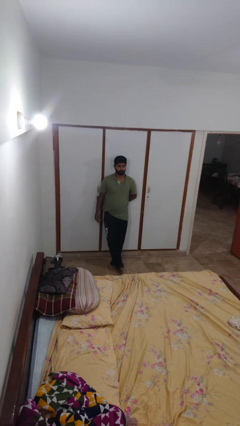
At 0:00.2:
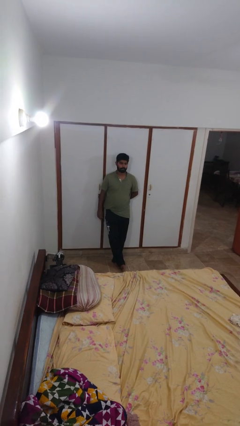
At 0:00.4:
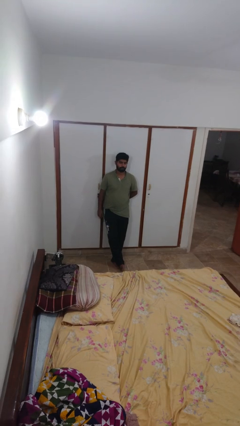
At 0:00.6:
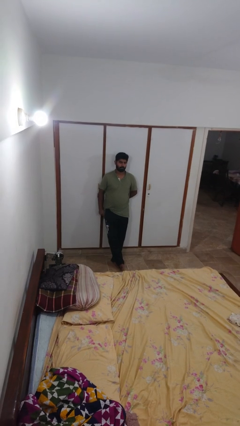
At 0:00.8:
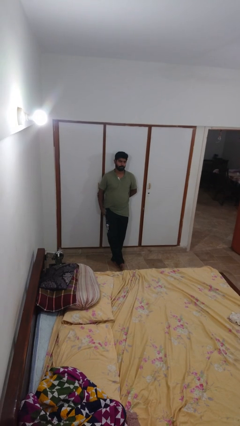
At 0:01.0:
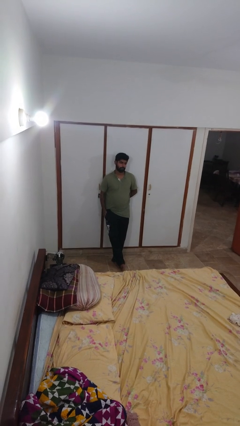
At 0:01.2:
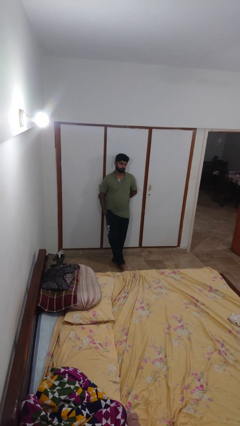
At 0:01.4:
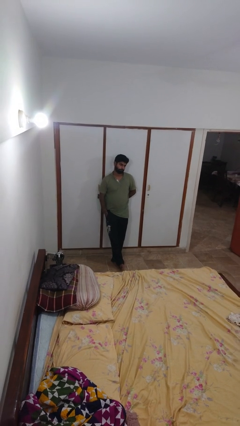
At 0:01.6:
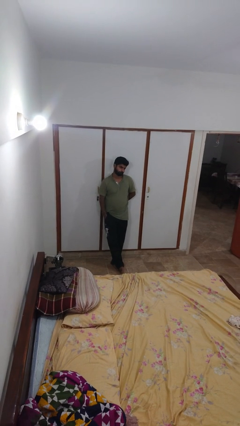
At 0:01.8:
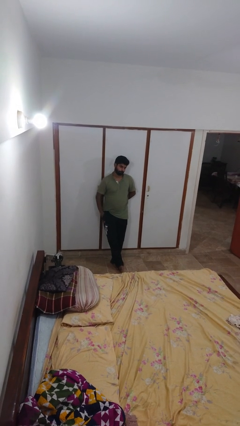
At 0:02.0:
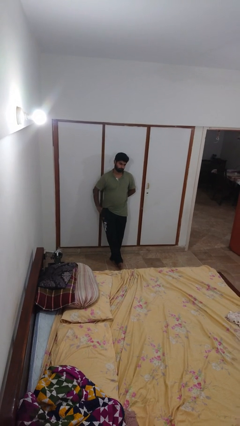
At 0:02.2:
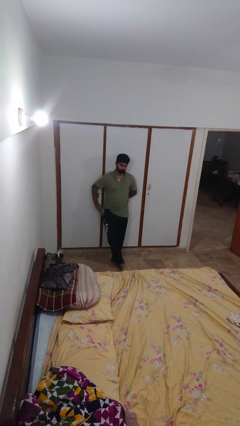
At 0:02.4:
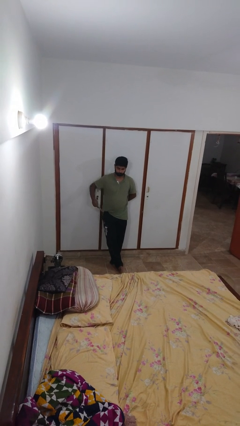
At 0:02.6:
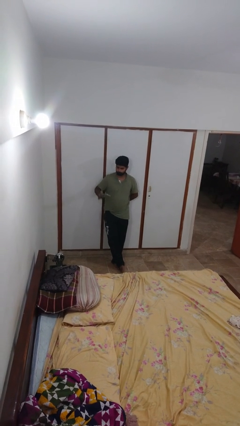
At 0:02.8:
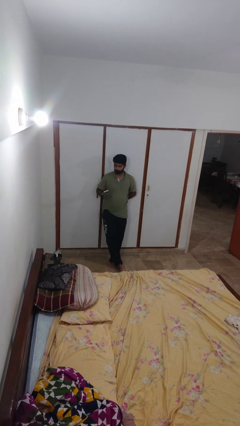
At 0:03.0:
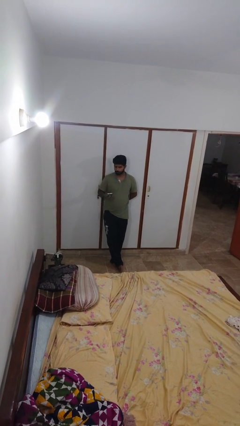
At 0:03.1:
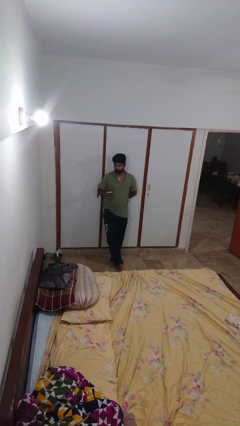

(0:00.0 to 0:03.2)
person takes phone from pocket

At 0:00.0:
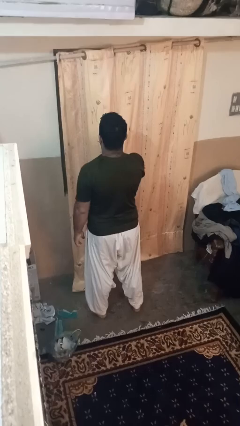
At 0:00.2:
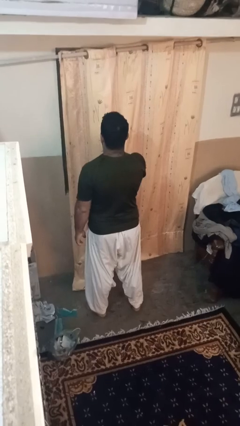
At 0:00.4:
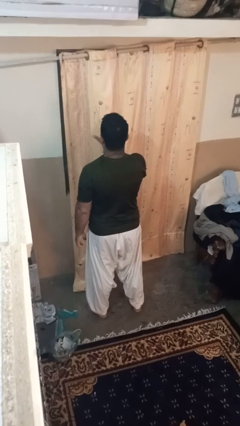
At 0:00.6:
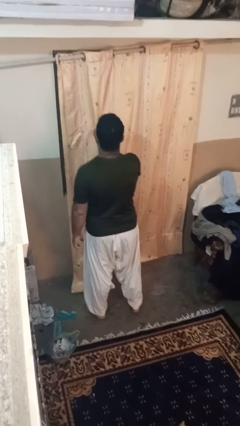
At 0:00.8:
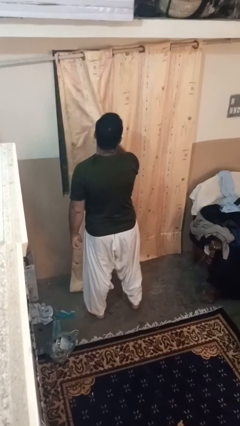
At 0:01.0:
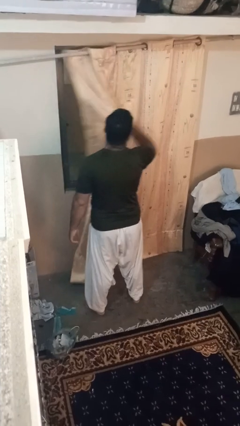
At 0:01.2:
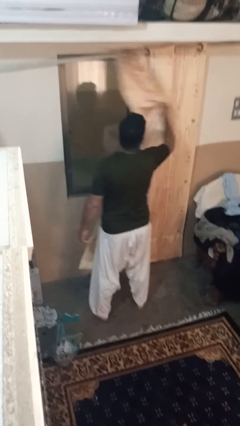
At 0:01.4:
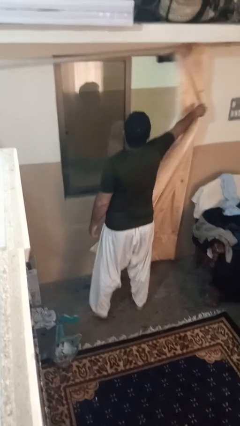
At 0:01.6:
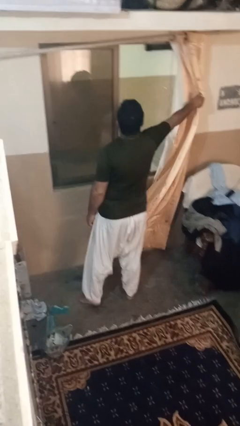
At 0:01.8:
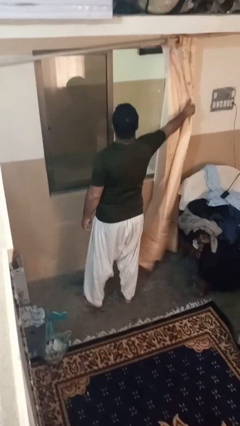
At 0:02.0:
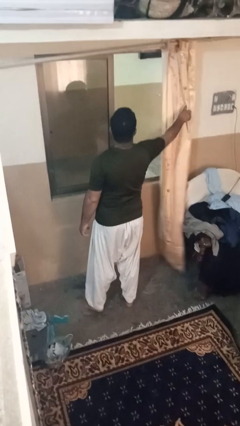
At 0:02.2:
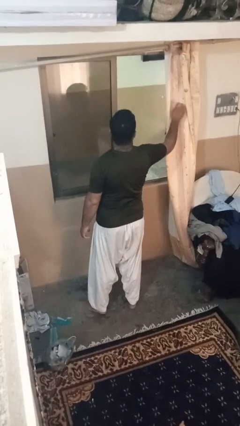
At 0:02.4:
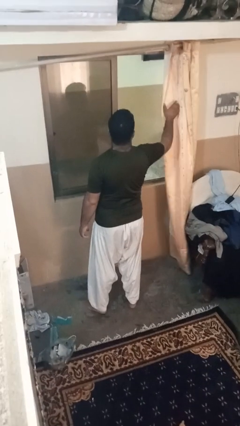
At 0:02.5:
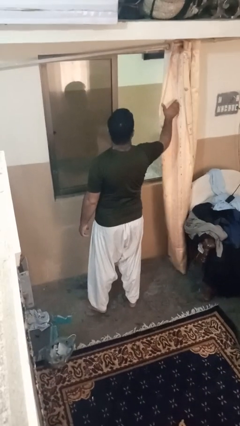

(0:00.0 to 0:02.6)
person opens curtains

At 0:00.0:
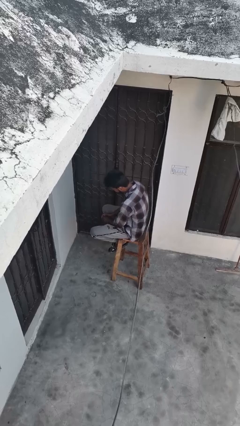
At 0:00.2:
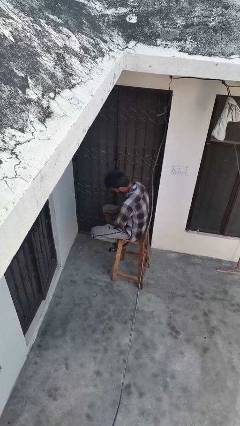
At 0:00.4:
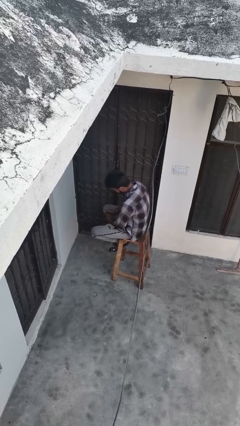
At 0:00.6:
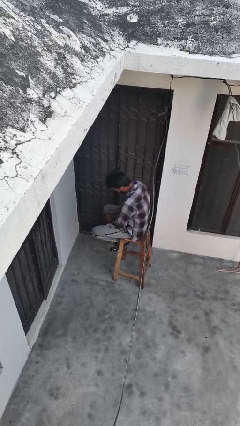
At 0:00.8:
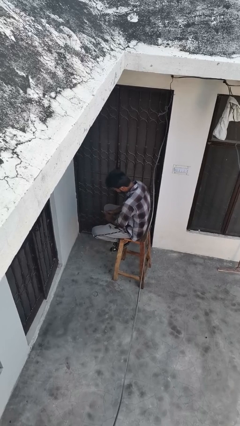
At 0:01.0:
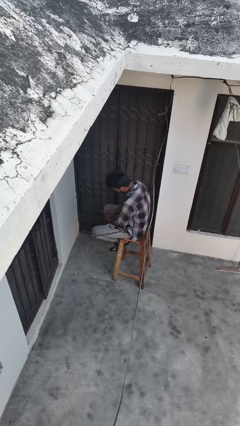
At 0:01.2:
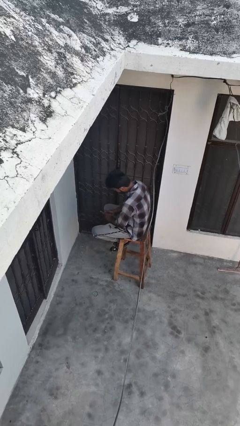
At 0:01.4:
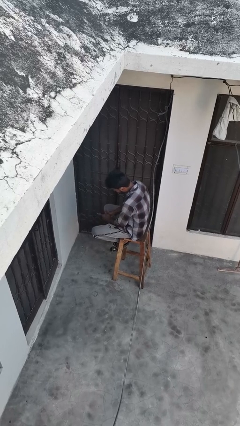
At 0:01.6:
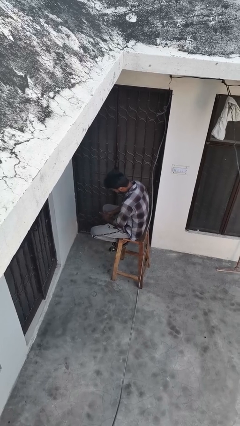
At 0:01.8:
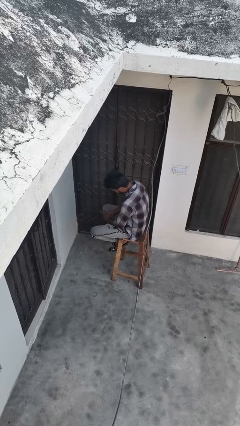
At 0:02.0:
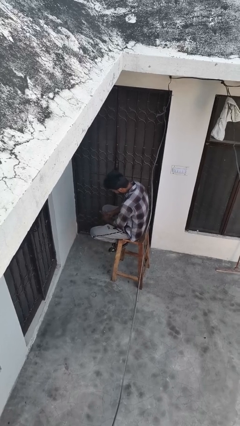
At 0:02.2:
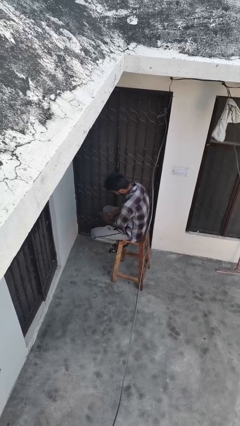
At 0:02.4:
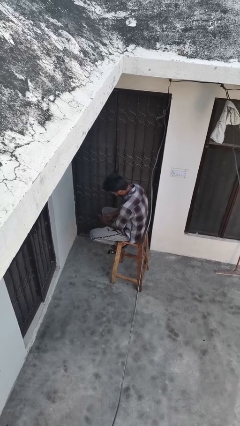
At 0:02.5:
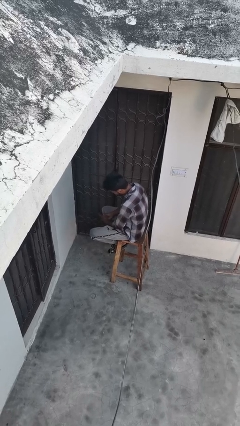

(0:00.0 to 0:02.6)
person looks at hands in lap

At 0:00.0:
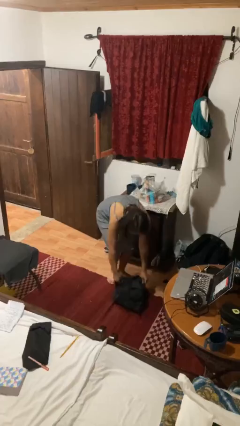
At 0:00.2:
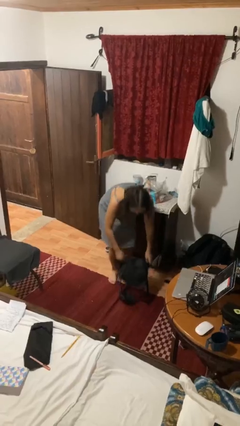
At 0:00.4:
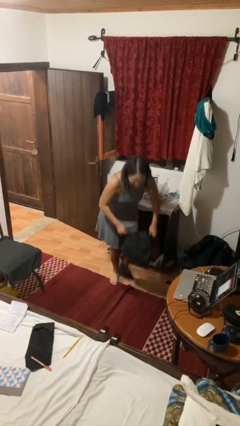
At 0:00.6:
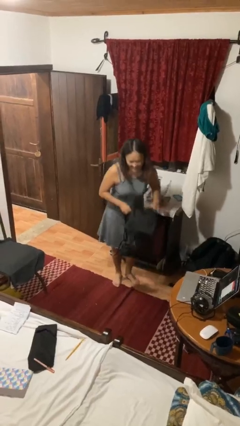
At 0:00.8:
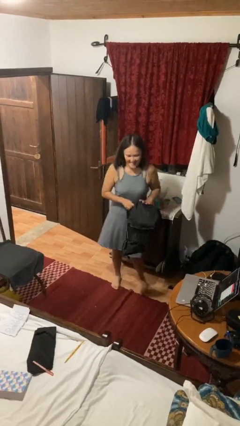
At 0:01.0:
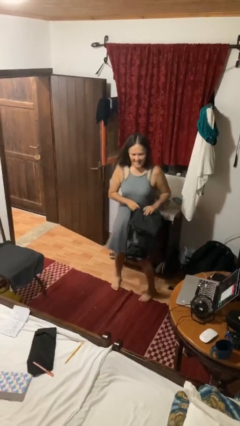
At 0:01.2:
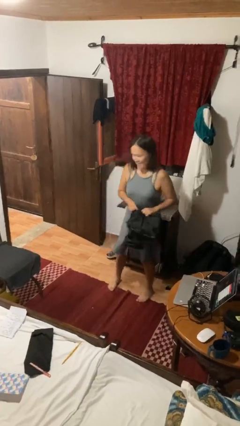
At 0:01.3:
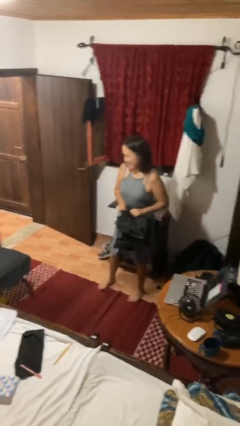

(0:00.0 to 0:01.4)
person picks up object from floor

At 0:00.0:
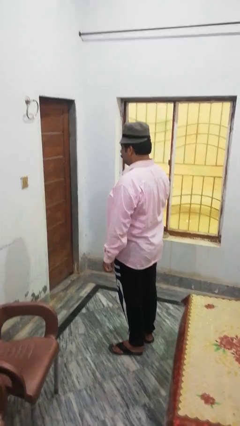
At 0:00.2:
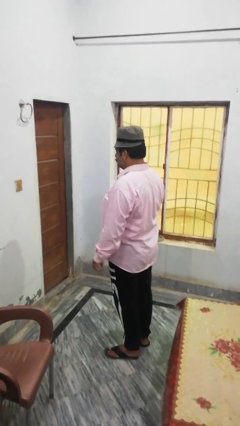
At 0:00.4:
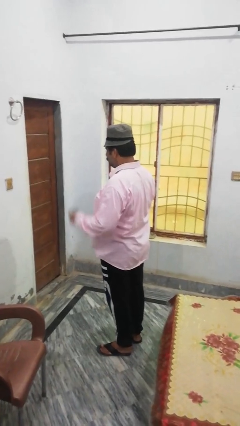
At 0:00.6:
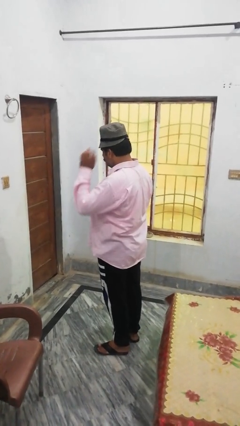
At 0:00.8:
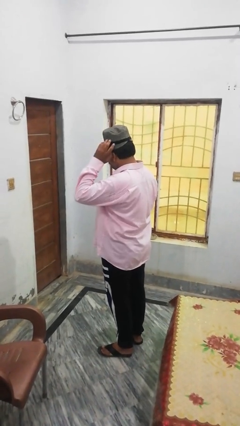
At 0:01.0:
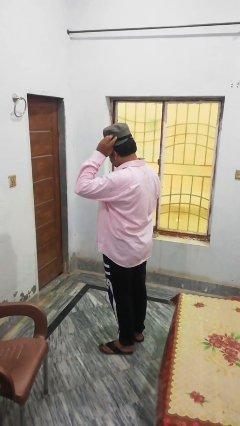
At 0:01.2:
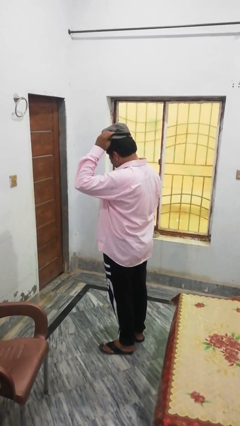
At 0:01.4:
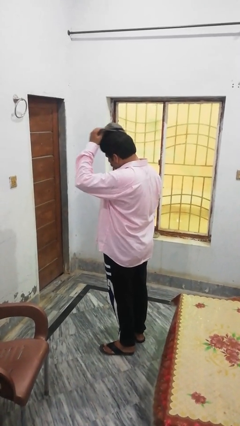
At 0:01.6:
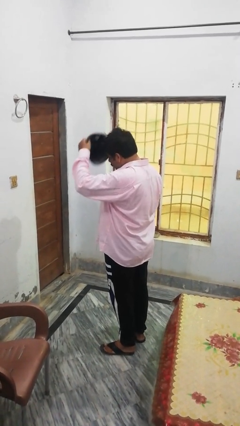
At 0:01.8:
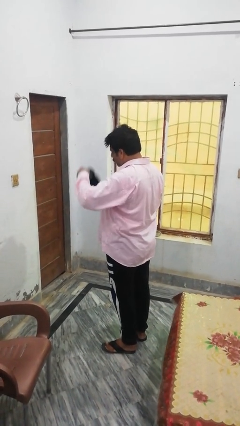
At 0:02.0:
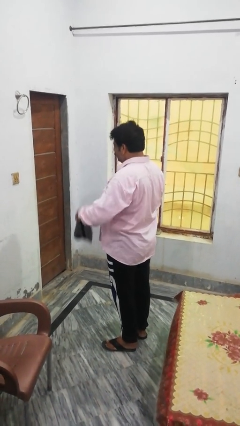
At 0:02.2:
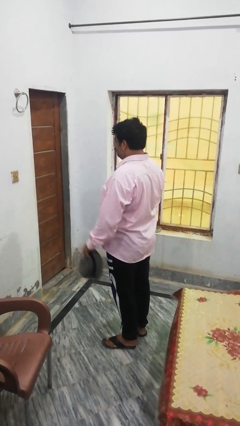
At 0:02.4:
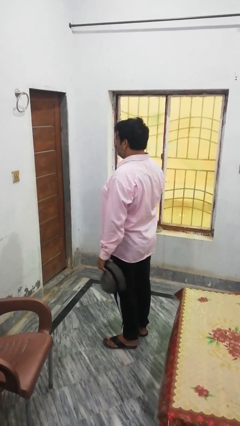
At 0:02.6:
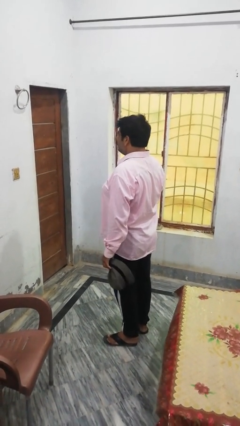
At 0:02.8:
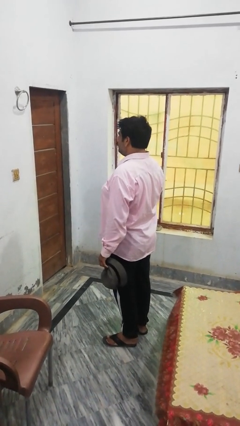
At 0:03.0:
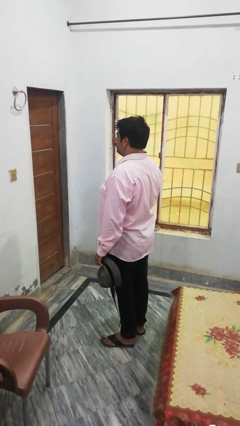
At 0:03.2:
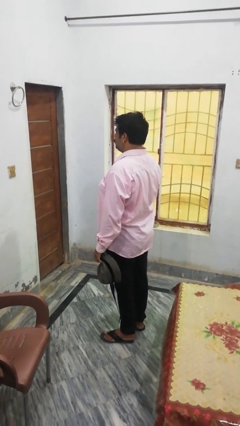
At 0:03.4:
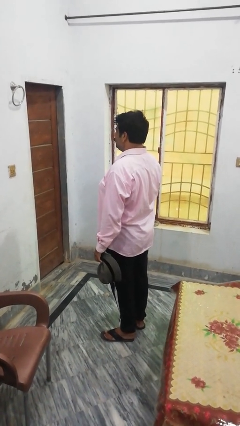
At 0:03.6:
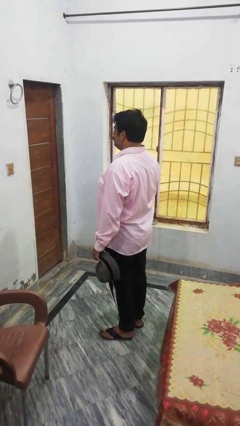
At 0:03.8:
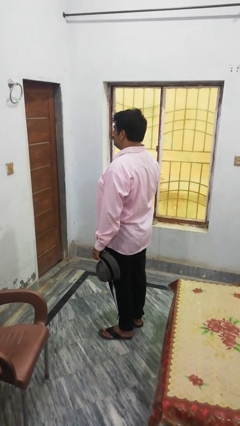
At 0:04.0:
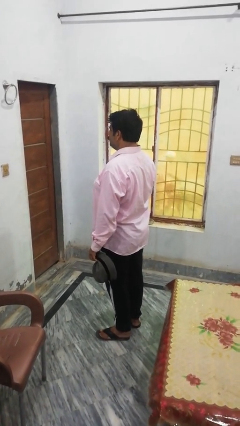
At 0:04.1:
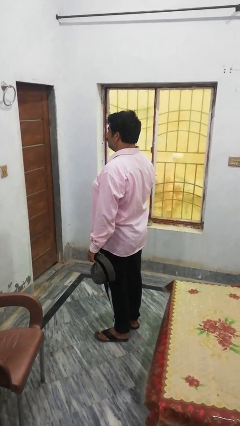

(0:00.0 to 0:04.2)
person takes off hat

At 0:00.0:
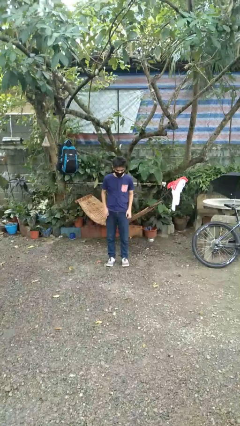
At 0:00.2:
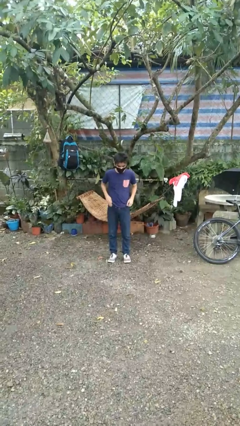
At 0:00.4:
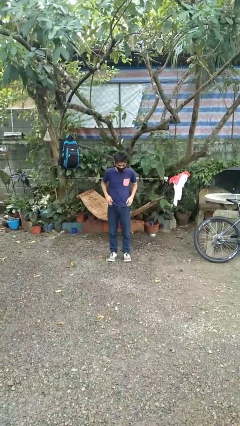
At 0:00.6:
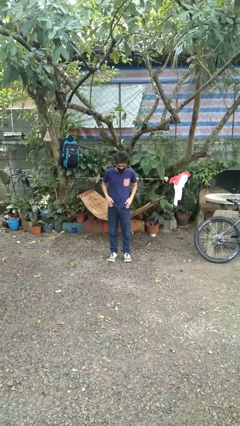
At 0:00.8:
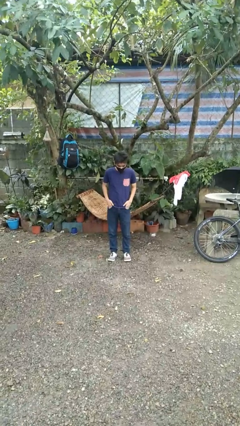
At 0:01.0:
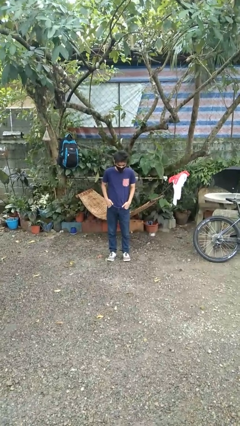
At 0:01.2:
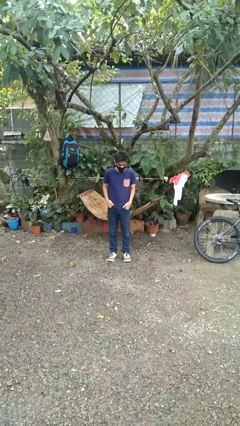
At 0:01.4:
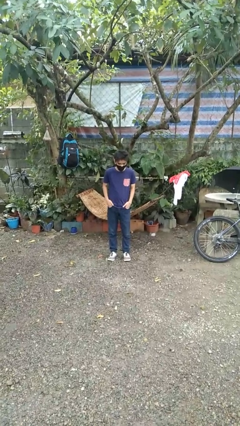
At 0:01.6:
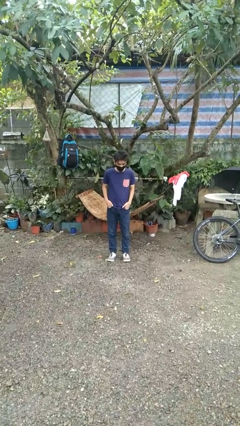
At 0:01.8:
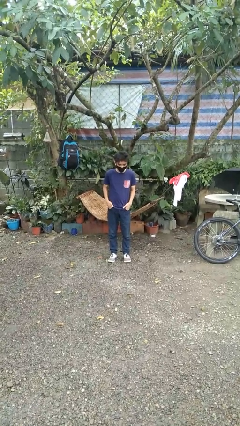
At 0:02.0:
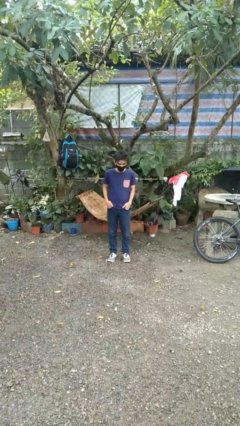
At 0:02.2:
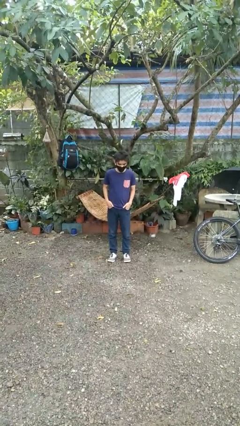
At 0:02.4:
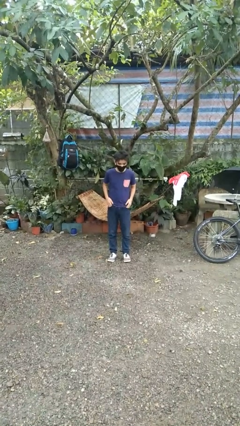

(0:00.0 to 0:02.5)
person puts hands in back pockets

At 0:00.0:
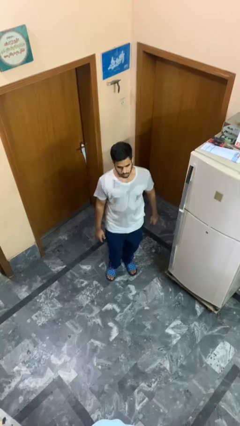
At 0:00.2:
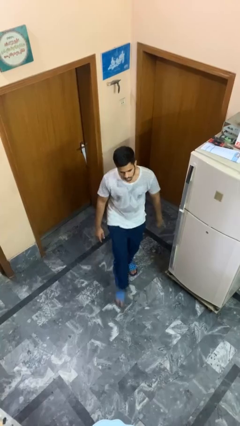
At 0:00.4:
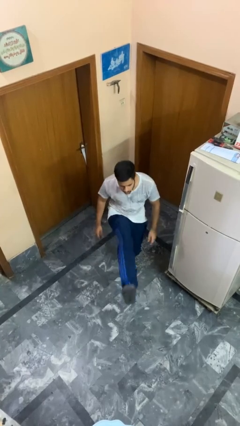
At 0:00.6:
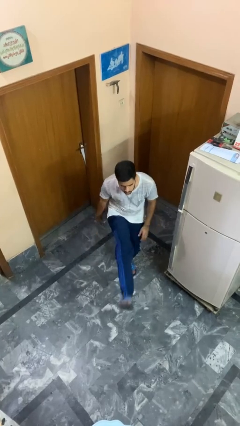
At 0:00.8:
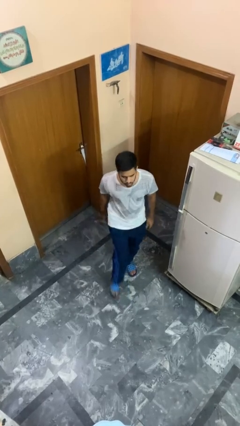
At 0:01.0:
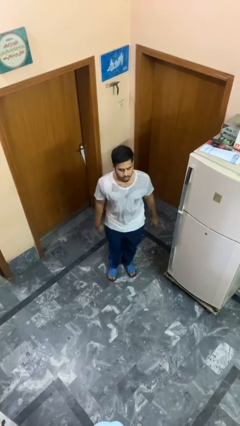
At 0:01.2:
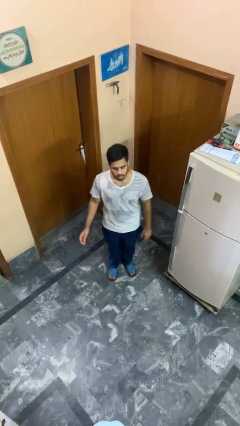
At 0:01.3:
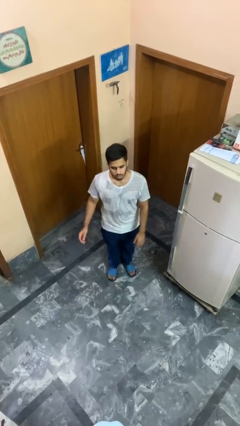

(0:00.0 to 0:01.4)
person karate kicks
